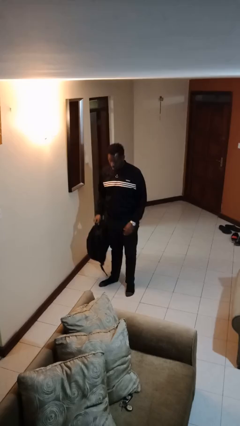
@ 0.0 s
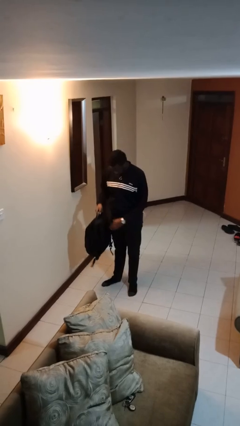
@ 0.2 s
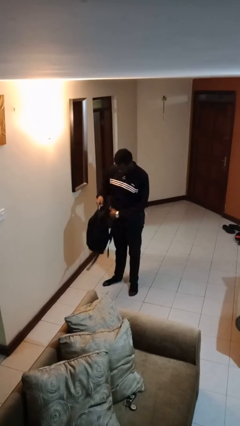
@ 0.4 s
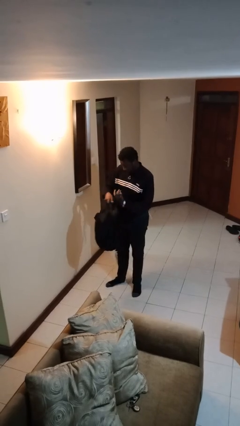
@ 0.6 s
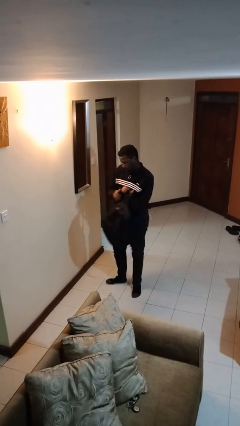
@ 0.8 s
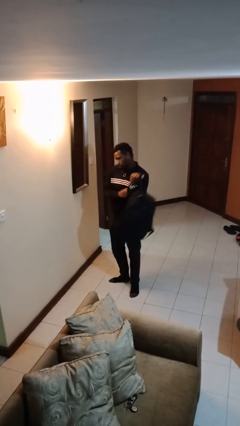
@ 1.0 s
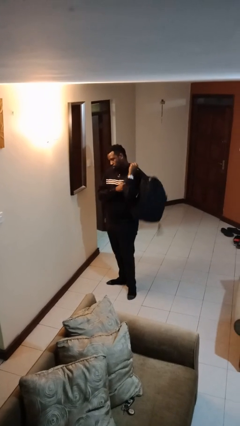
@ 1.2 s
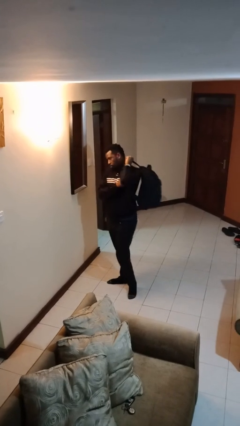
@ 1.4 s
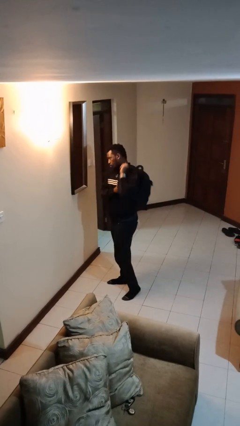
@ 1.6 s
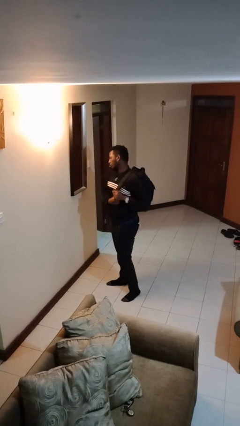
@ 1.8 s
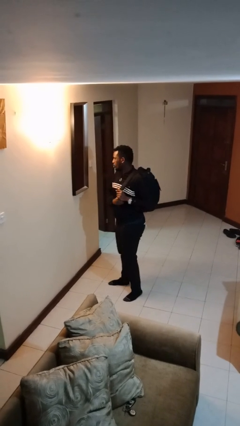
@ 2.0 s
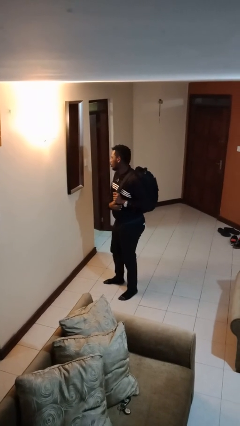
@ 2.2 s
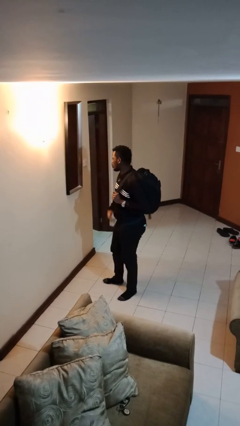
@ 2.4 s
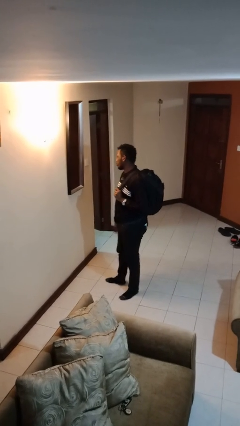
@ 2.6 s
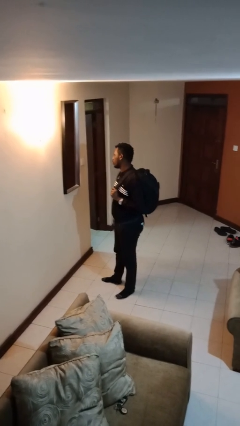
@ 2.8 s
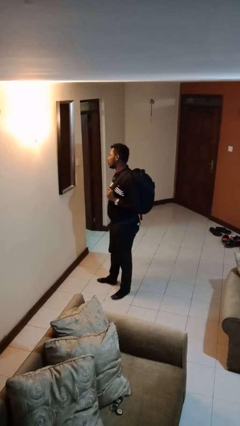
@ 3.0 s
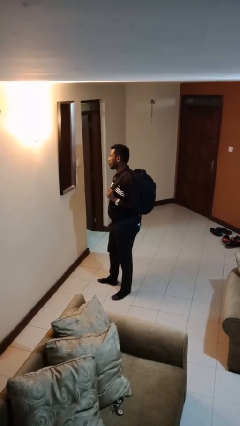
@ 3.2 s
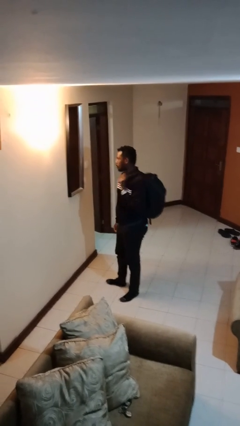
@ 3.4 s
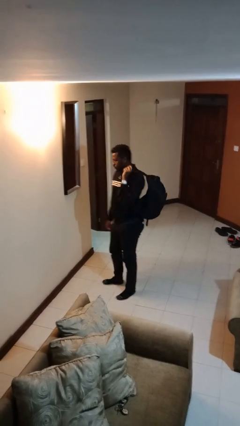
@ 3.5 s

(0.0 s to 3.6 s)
person puts on backpack

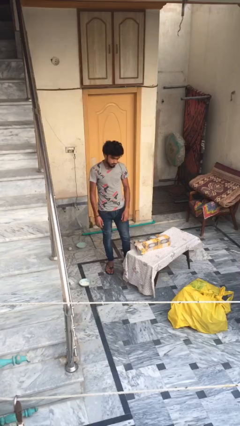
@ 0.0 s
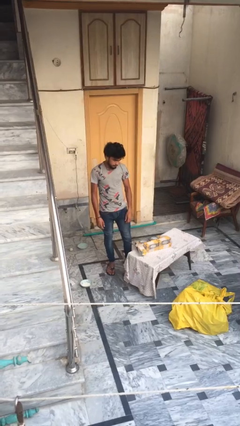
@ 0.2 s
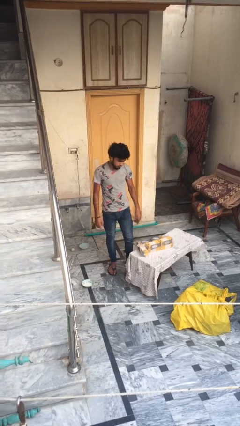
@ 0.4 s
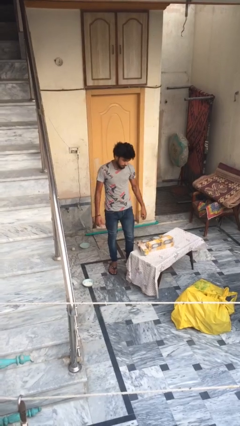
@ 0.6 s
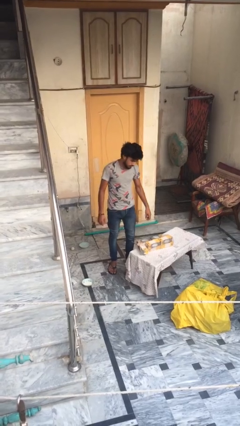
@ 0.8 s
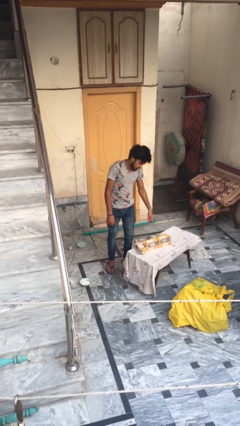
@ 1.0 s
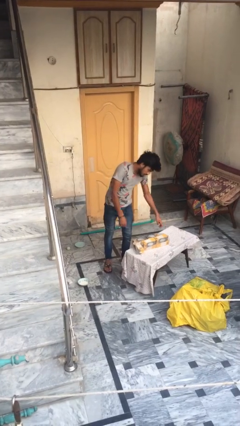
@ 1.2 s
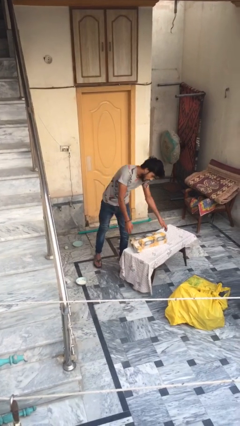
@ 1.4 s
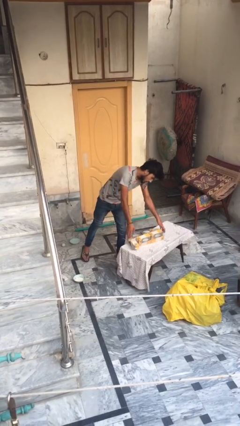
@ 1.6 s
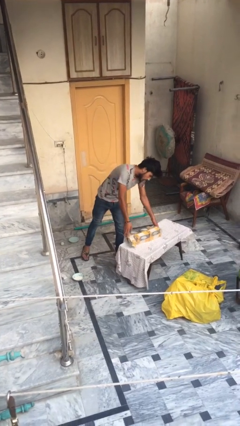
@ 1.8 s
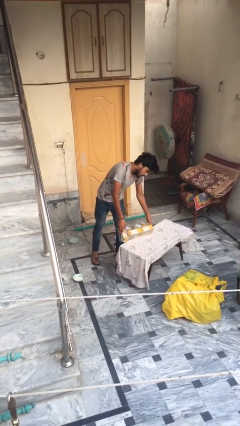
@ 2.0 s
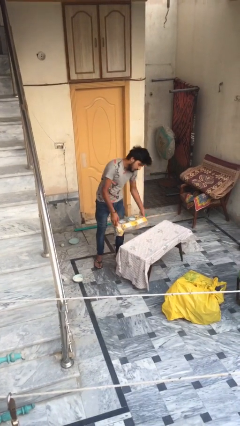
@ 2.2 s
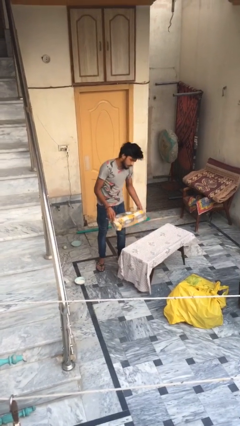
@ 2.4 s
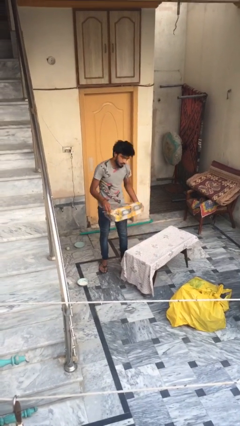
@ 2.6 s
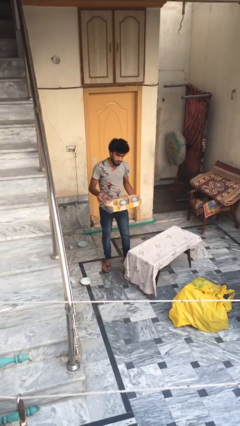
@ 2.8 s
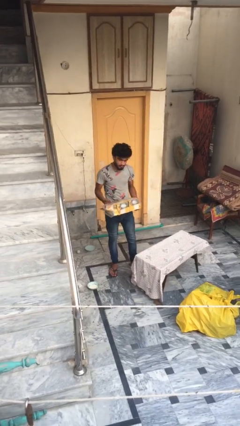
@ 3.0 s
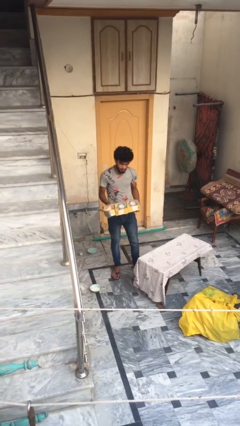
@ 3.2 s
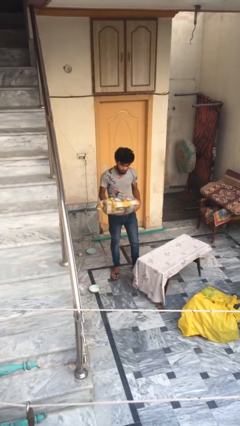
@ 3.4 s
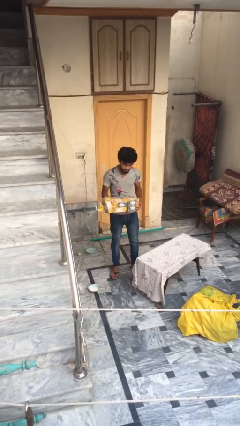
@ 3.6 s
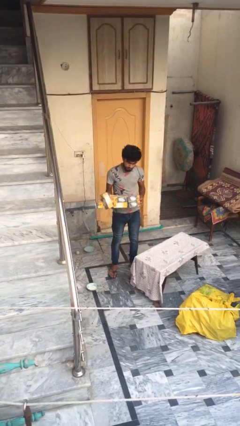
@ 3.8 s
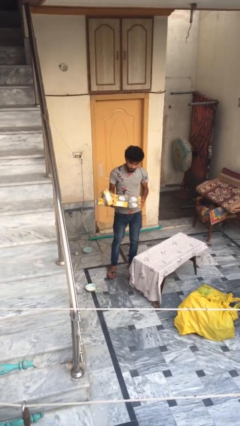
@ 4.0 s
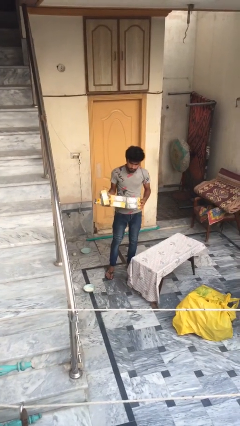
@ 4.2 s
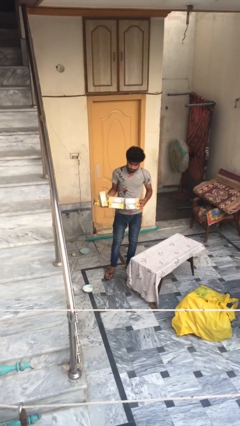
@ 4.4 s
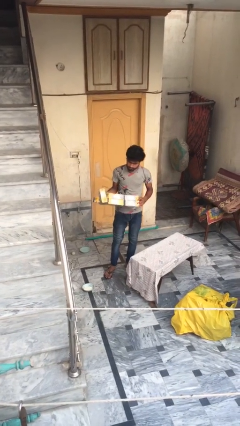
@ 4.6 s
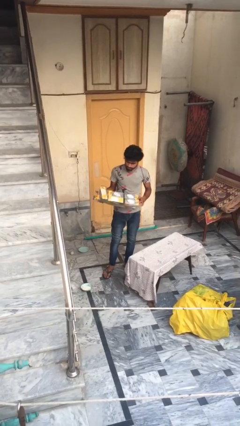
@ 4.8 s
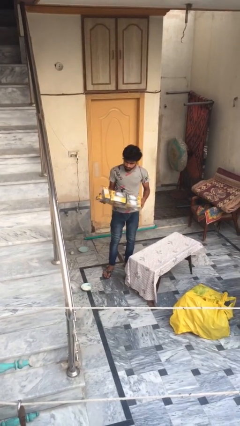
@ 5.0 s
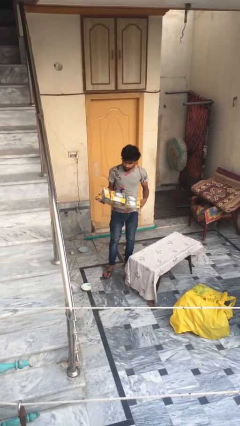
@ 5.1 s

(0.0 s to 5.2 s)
person picks up object from table

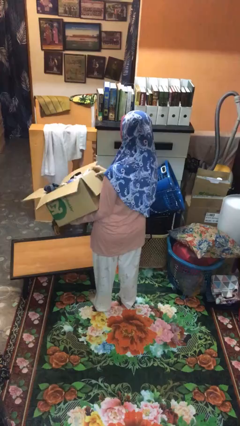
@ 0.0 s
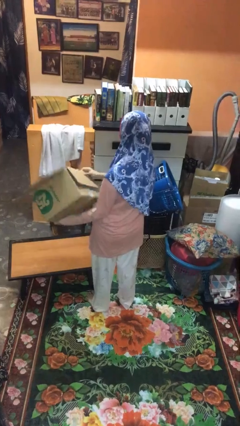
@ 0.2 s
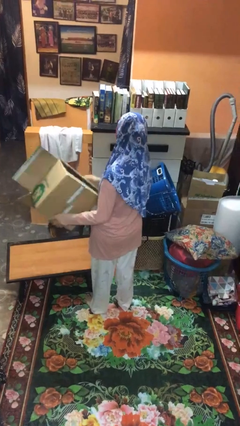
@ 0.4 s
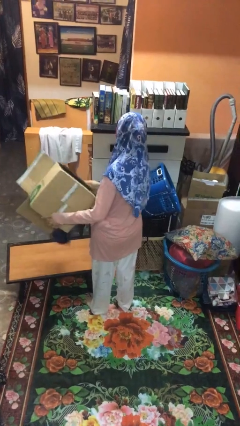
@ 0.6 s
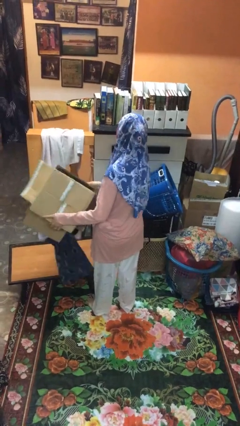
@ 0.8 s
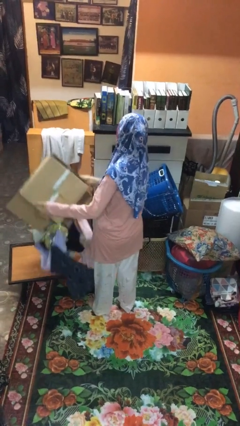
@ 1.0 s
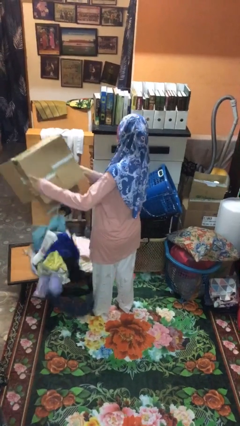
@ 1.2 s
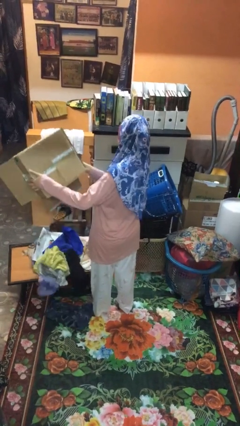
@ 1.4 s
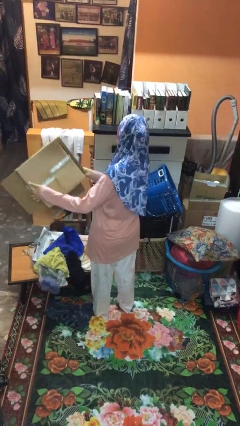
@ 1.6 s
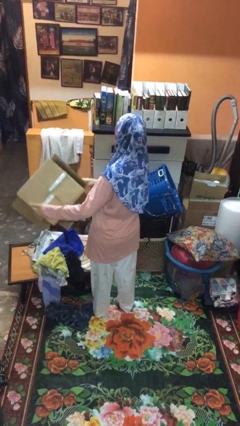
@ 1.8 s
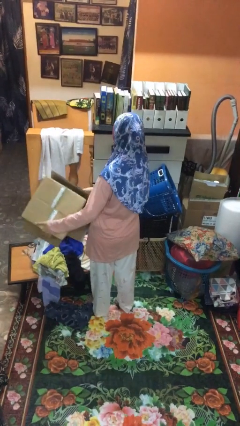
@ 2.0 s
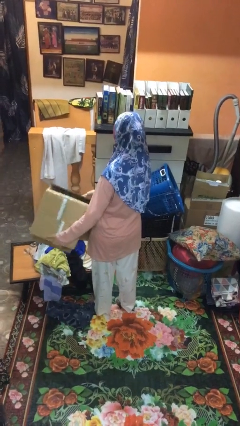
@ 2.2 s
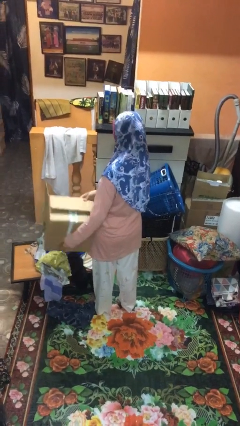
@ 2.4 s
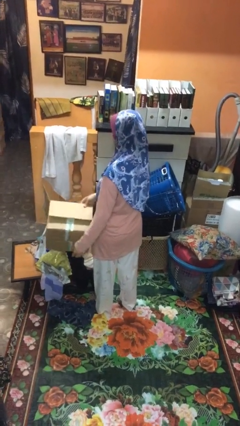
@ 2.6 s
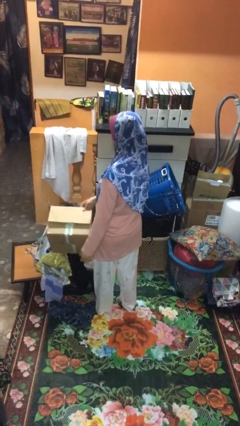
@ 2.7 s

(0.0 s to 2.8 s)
person unloads box onto table

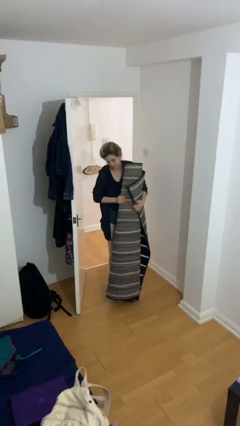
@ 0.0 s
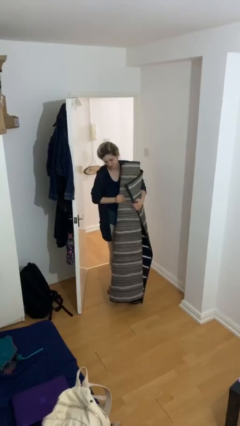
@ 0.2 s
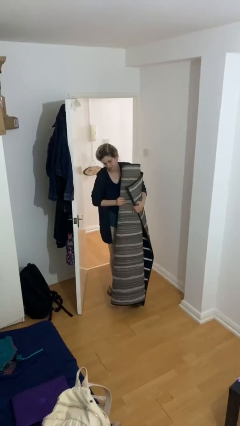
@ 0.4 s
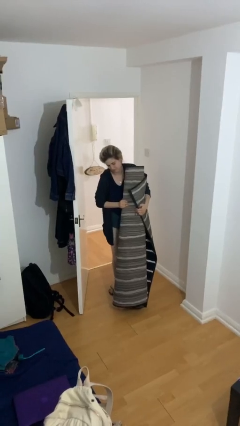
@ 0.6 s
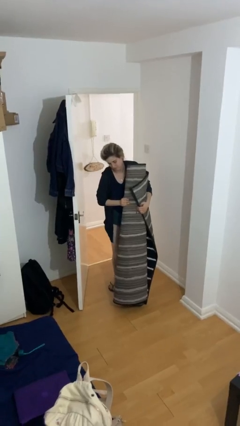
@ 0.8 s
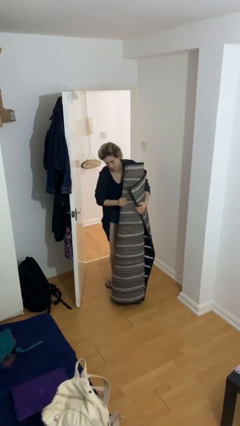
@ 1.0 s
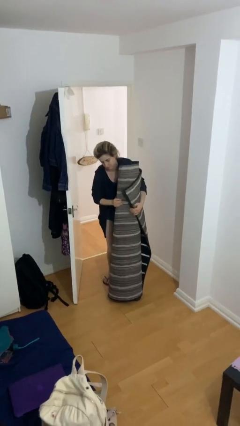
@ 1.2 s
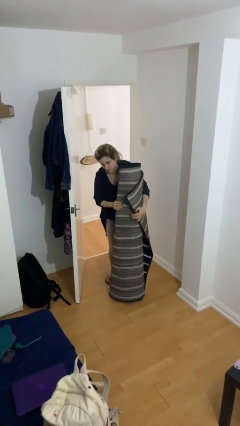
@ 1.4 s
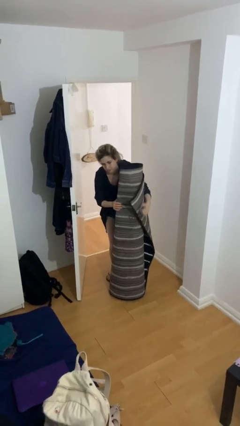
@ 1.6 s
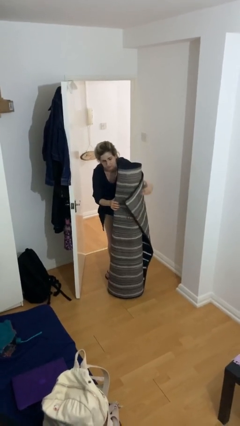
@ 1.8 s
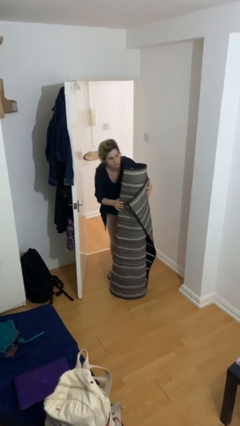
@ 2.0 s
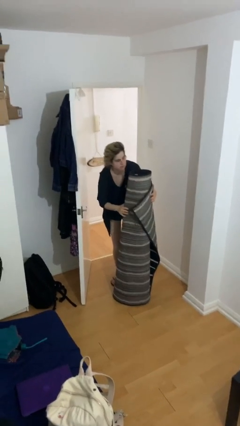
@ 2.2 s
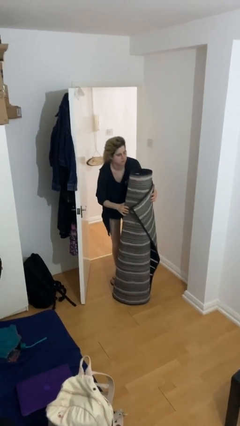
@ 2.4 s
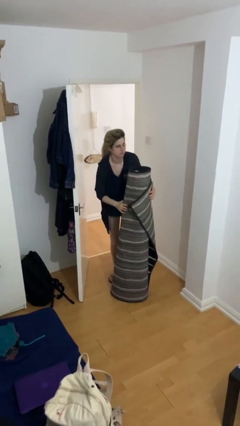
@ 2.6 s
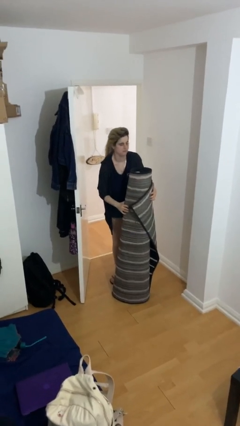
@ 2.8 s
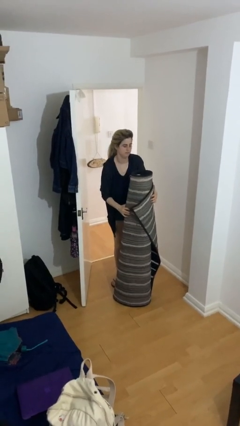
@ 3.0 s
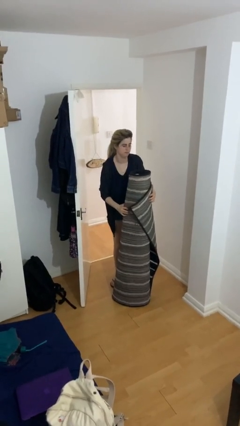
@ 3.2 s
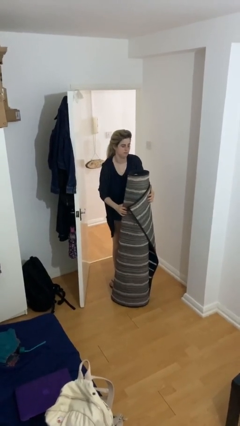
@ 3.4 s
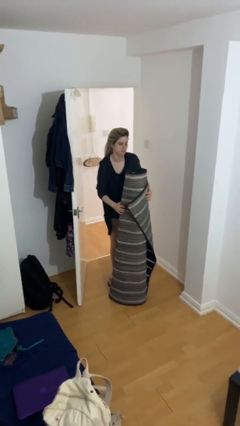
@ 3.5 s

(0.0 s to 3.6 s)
person puts down object on floor

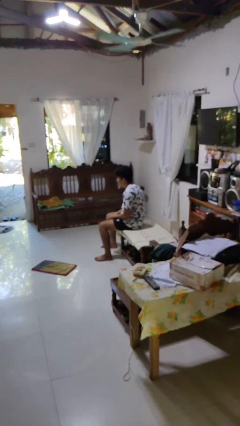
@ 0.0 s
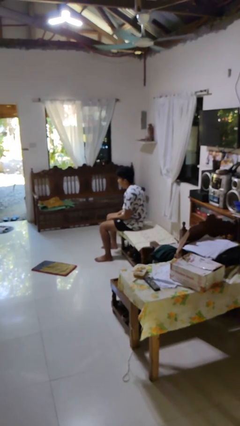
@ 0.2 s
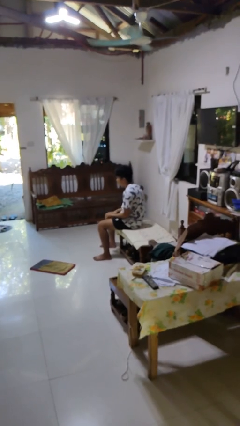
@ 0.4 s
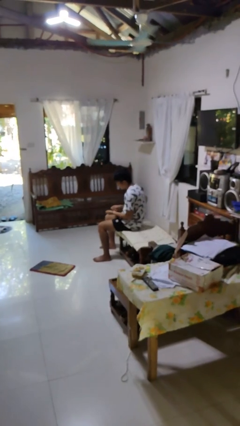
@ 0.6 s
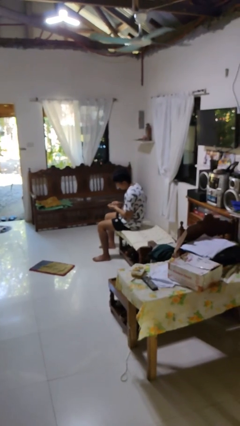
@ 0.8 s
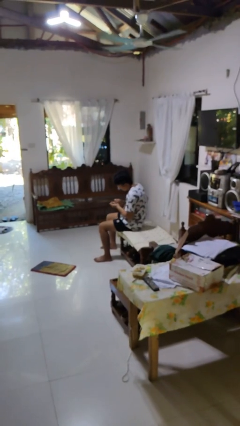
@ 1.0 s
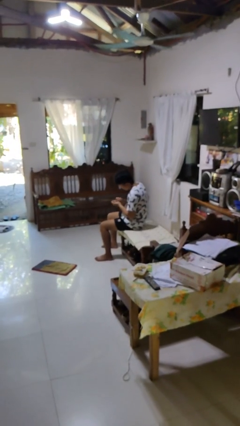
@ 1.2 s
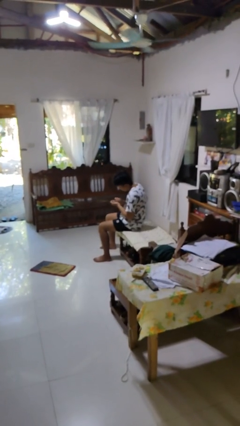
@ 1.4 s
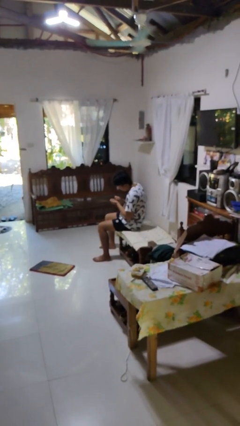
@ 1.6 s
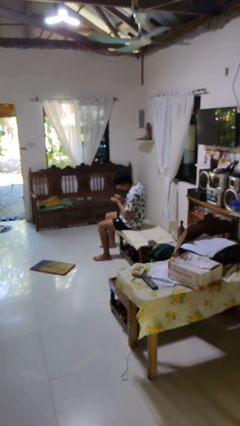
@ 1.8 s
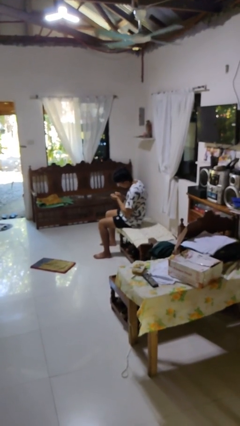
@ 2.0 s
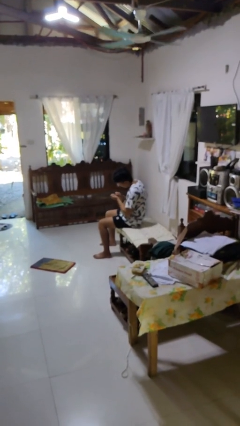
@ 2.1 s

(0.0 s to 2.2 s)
person files fingernails

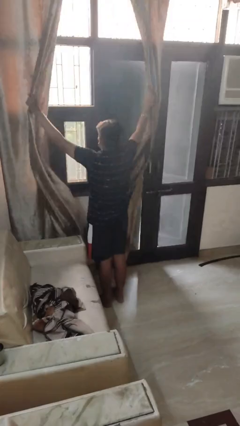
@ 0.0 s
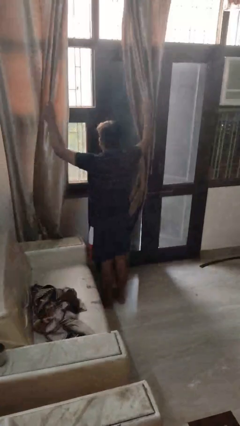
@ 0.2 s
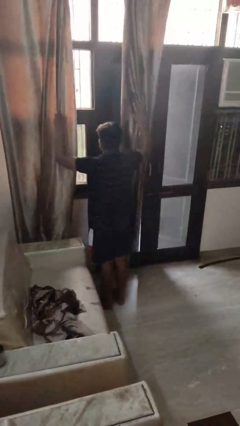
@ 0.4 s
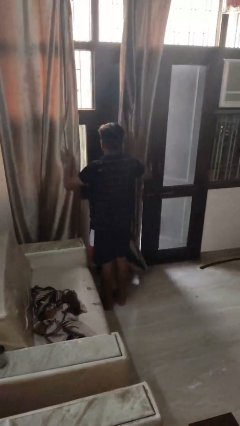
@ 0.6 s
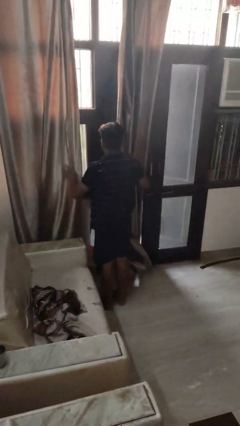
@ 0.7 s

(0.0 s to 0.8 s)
person opens curtains
